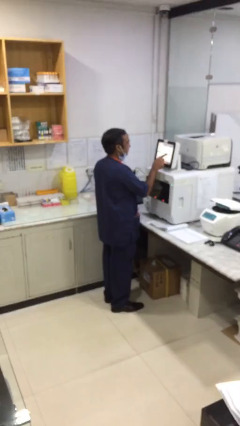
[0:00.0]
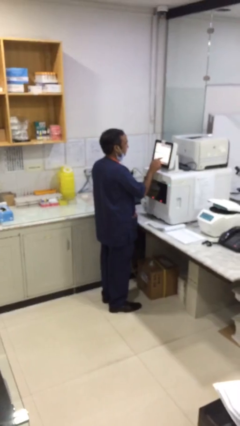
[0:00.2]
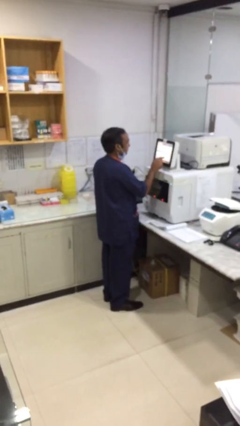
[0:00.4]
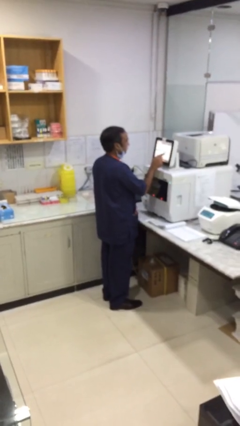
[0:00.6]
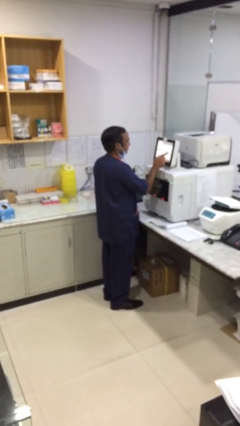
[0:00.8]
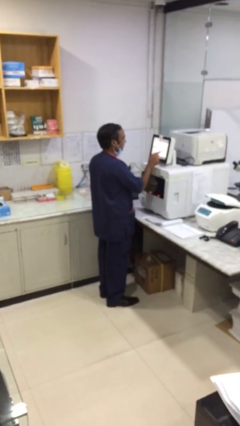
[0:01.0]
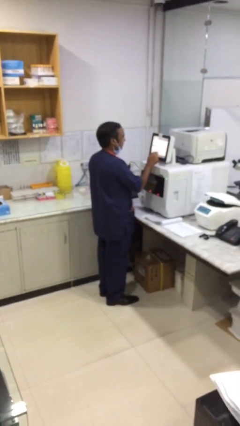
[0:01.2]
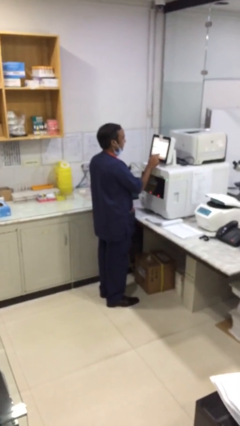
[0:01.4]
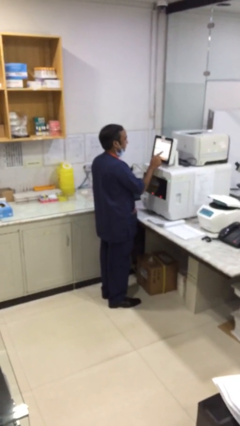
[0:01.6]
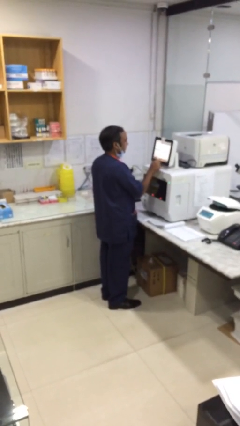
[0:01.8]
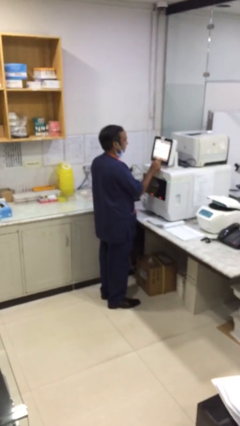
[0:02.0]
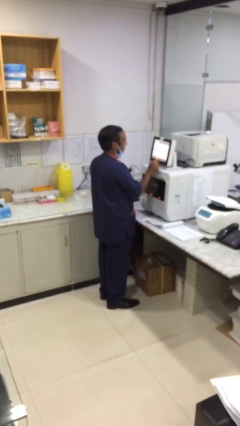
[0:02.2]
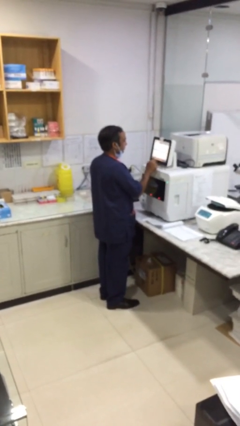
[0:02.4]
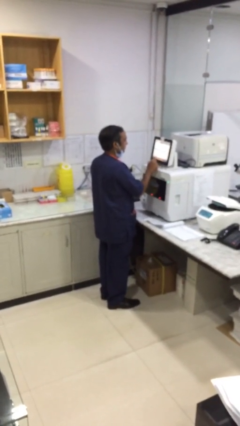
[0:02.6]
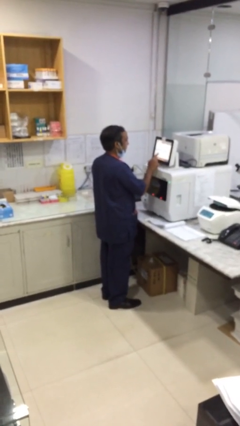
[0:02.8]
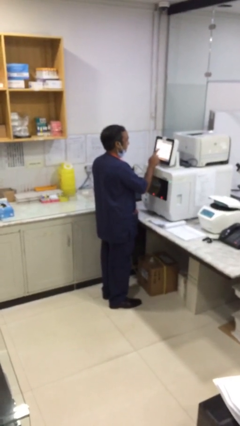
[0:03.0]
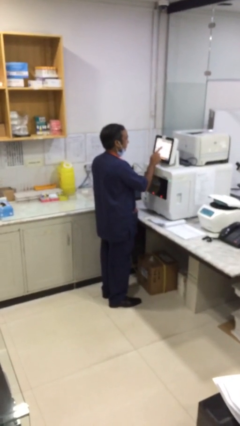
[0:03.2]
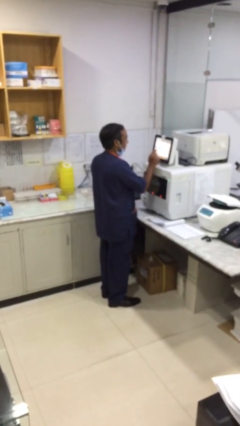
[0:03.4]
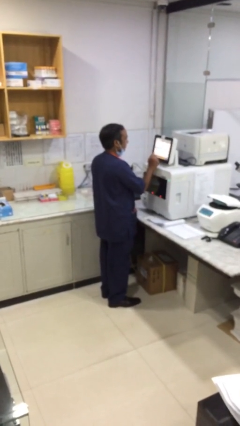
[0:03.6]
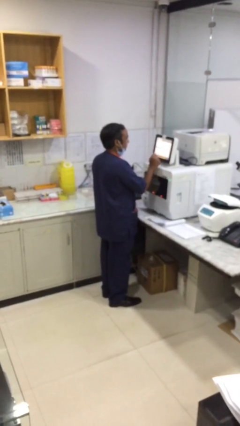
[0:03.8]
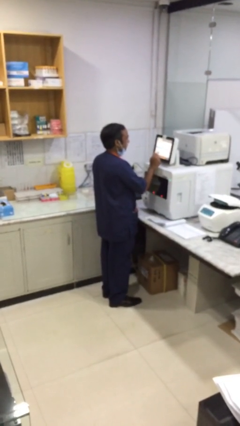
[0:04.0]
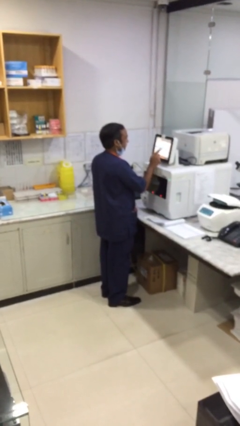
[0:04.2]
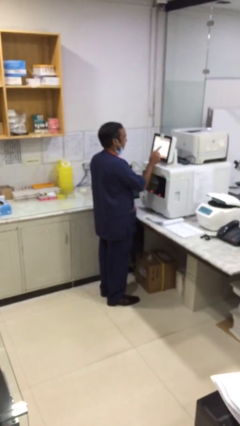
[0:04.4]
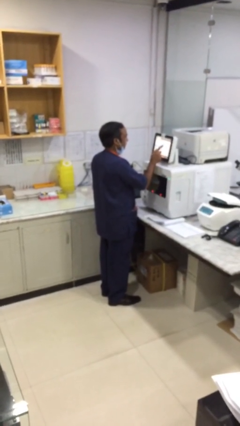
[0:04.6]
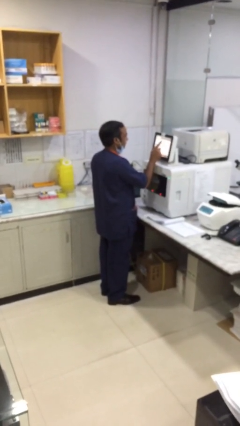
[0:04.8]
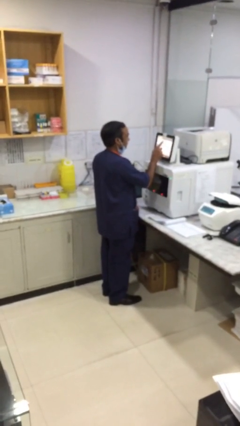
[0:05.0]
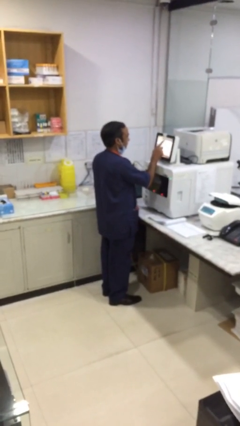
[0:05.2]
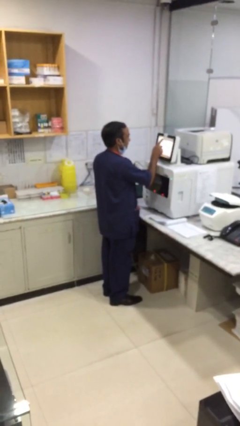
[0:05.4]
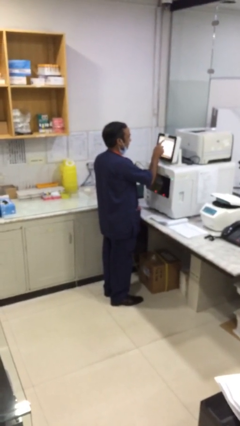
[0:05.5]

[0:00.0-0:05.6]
person purchases from machine

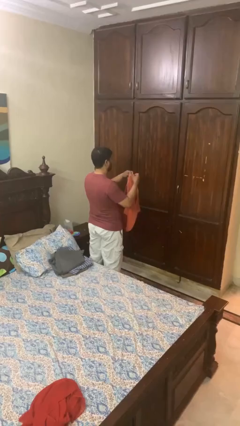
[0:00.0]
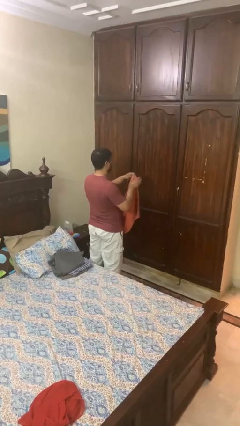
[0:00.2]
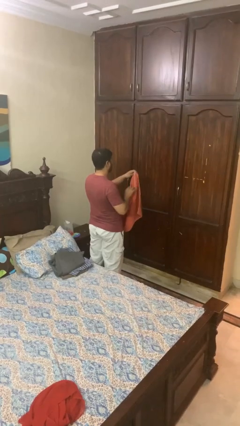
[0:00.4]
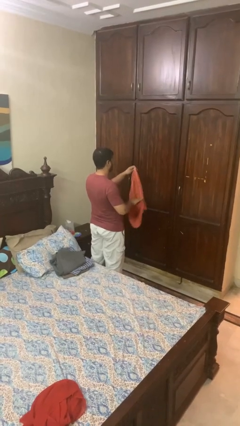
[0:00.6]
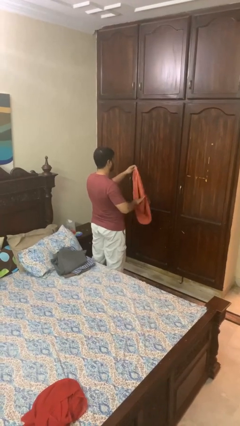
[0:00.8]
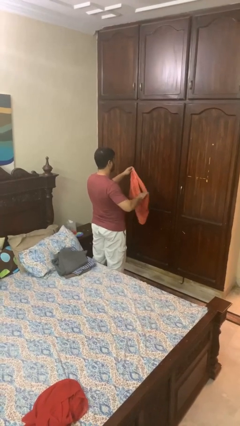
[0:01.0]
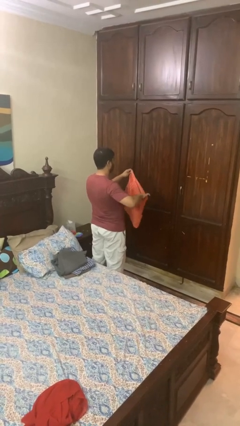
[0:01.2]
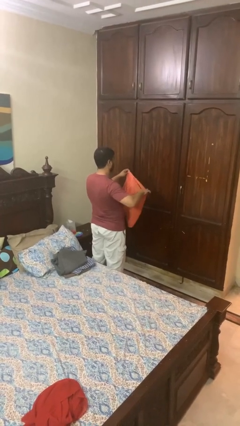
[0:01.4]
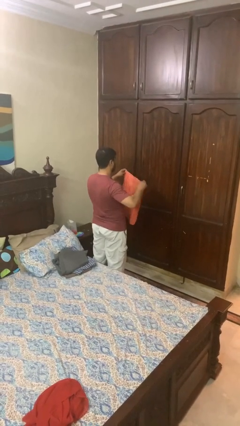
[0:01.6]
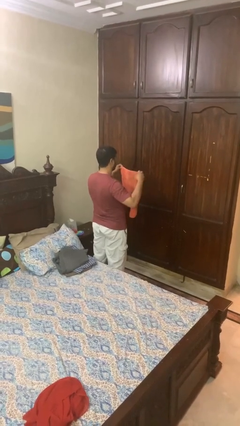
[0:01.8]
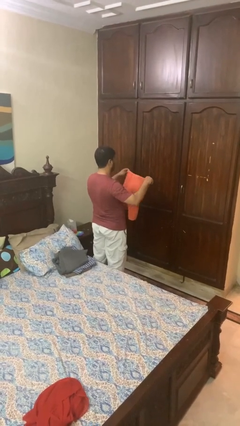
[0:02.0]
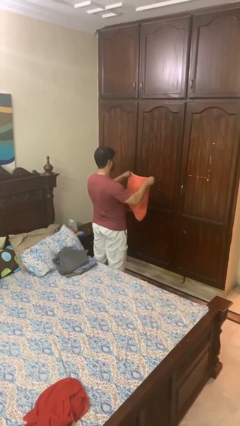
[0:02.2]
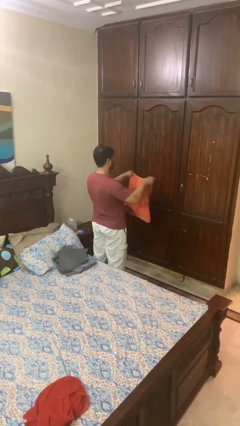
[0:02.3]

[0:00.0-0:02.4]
person folds towel

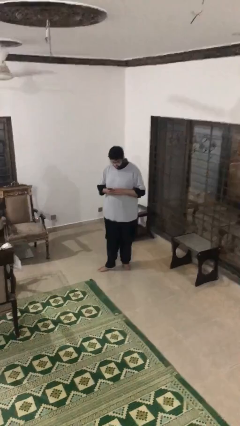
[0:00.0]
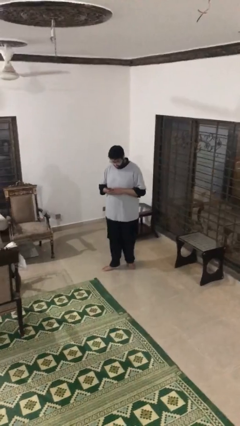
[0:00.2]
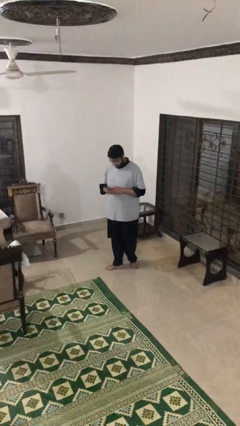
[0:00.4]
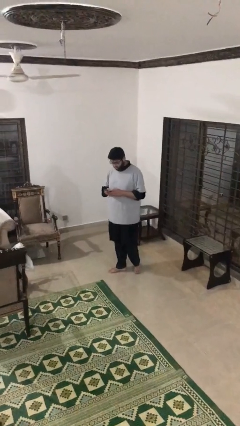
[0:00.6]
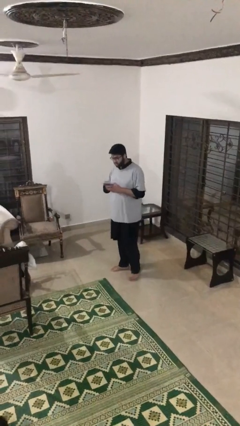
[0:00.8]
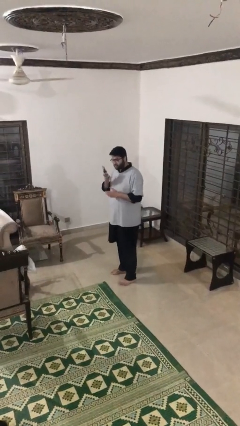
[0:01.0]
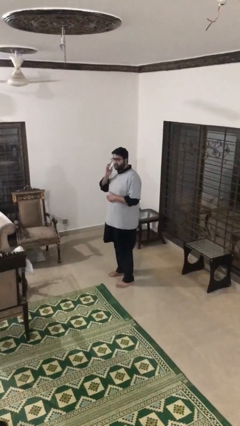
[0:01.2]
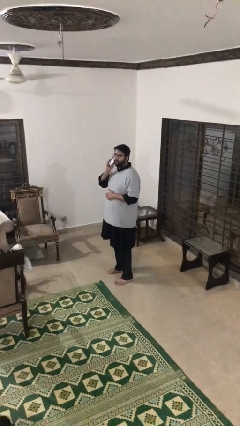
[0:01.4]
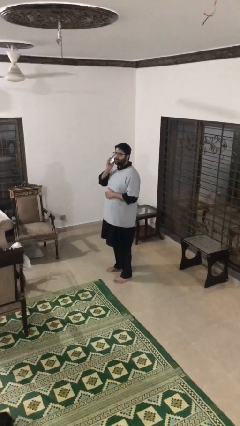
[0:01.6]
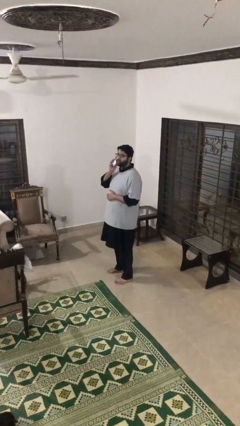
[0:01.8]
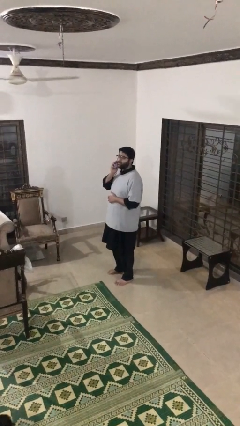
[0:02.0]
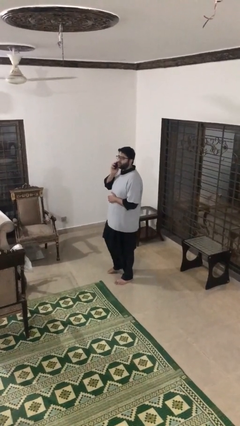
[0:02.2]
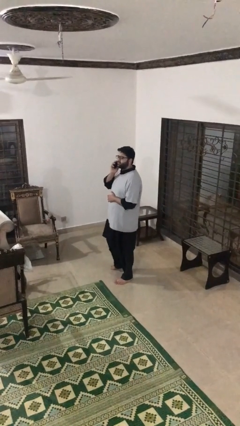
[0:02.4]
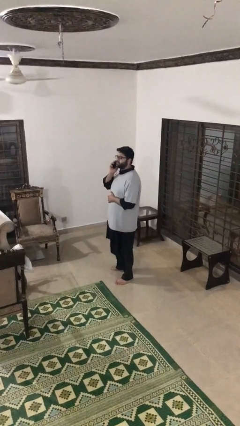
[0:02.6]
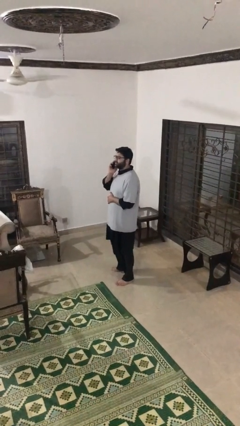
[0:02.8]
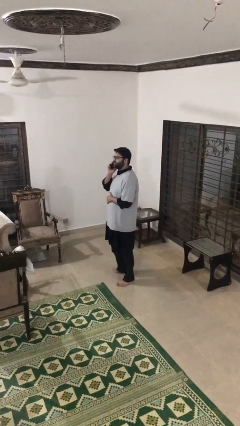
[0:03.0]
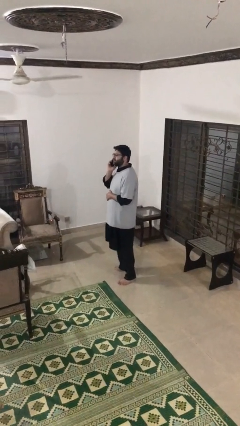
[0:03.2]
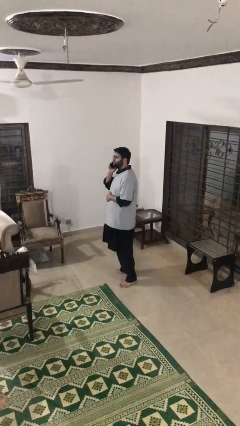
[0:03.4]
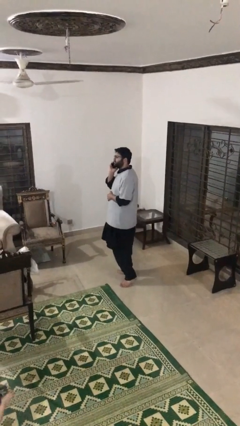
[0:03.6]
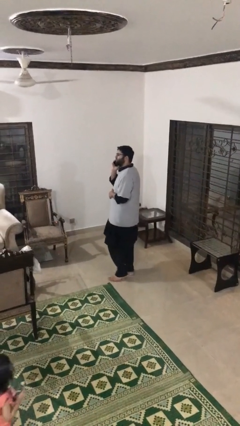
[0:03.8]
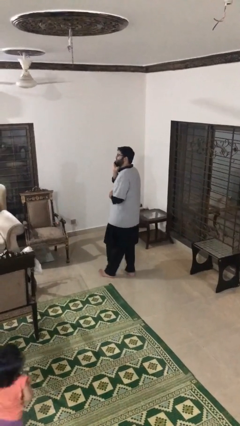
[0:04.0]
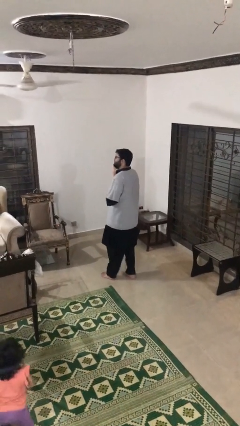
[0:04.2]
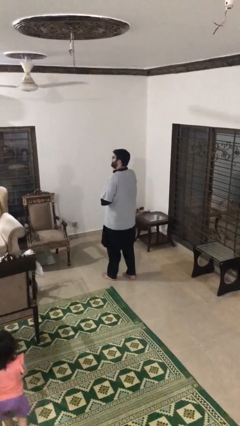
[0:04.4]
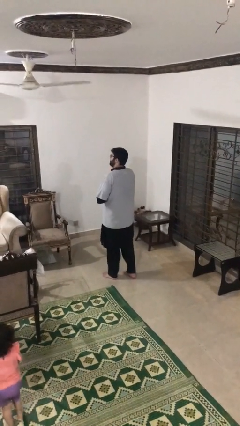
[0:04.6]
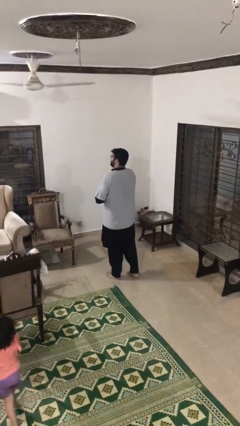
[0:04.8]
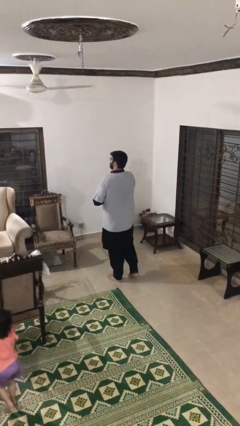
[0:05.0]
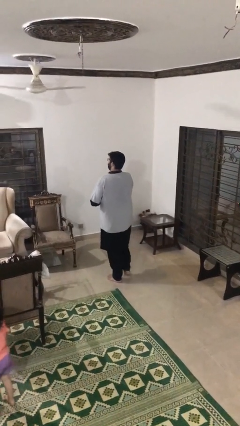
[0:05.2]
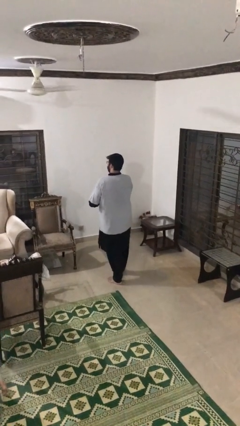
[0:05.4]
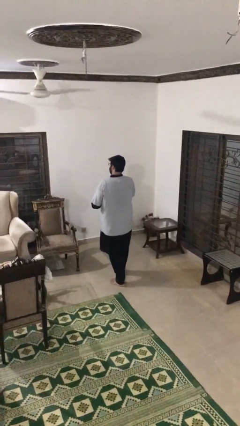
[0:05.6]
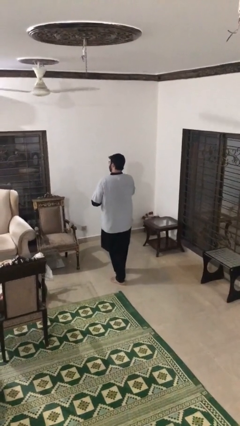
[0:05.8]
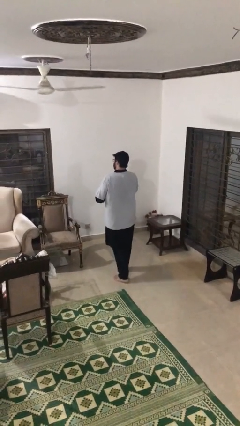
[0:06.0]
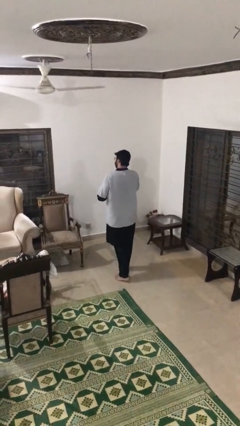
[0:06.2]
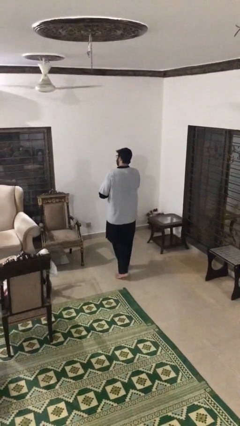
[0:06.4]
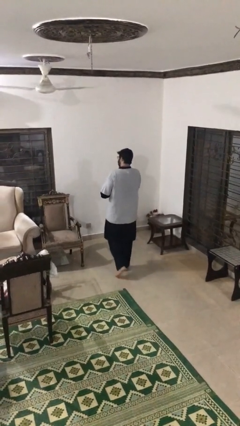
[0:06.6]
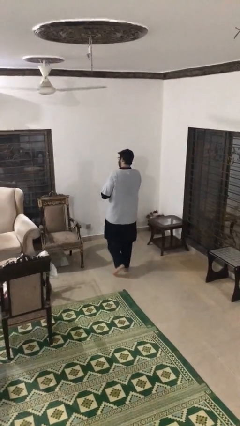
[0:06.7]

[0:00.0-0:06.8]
person talks on phone

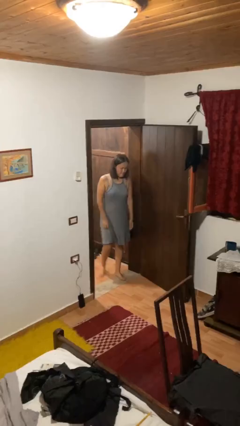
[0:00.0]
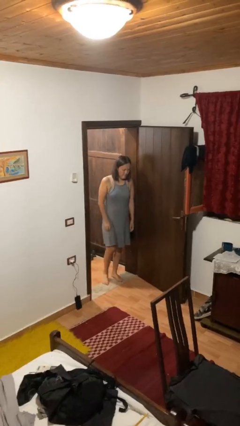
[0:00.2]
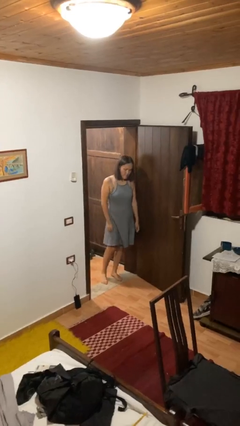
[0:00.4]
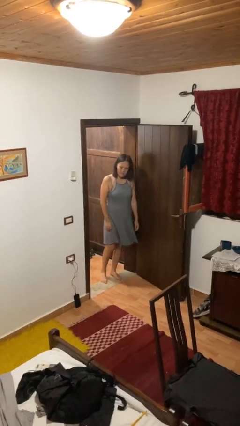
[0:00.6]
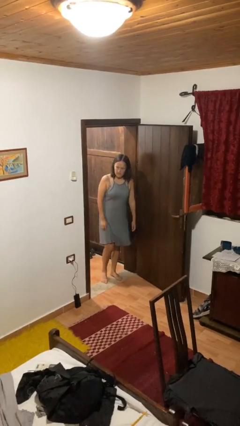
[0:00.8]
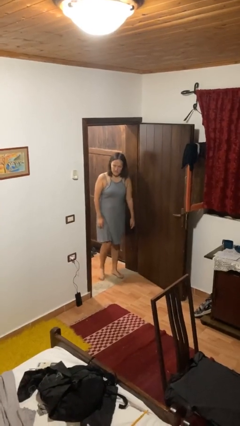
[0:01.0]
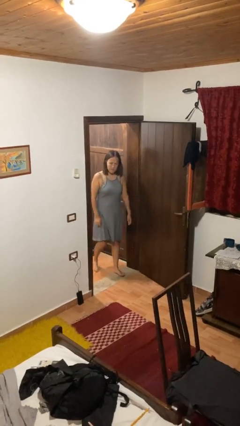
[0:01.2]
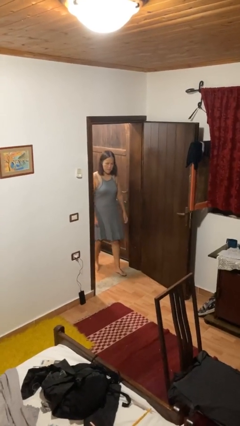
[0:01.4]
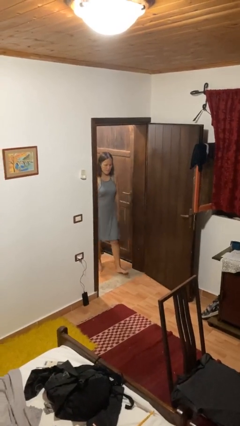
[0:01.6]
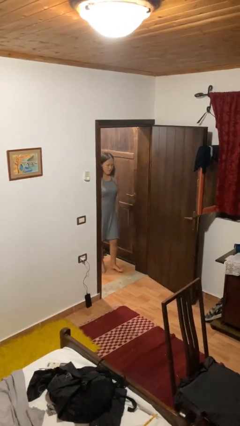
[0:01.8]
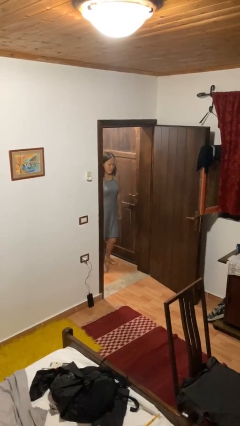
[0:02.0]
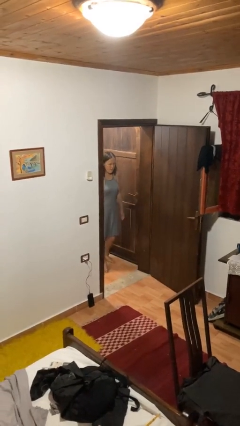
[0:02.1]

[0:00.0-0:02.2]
person bumps into wall

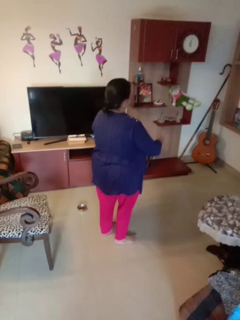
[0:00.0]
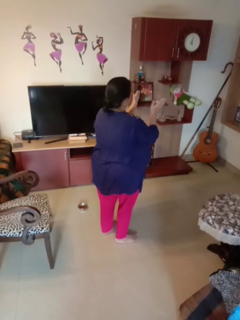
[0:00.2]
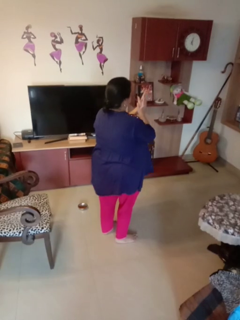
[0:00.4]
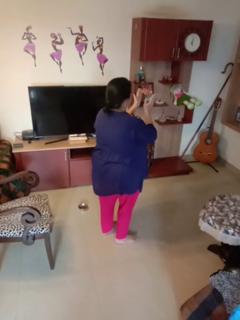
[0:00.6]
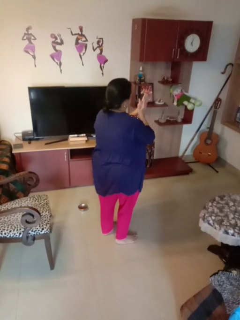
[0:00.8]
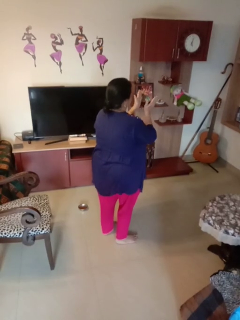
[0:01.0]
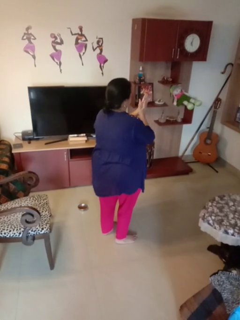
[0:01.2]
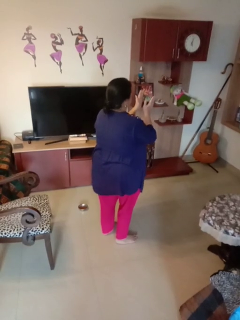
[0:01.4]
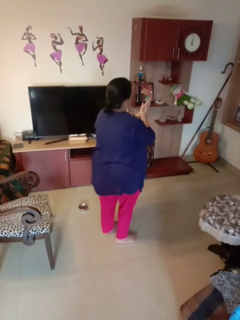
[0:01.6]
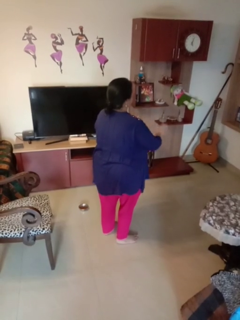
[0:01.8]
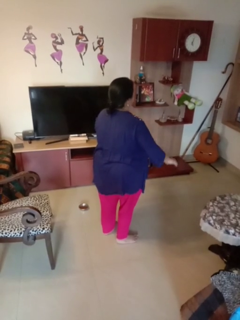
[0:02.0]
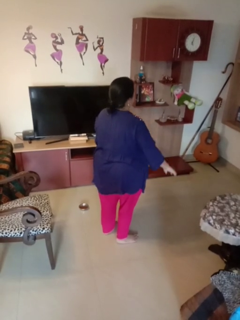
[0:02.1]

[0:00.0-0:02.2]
person claps hands
